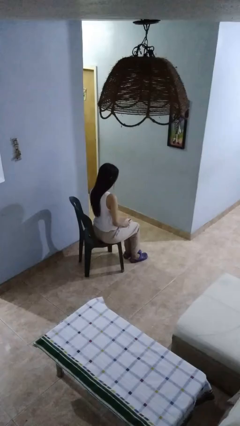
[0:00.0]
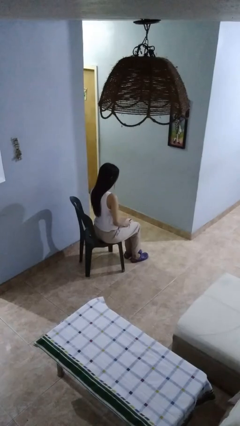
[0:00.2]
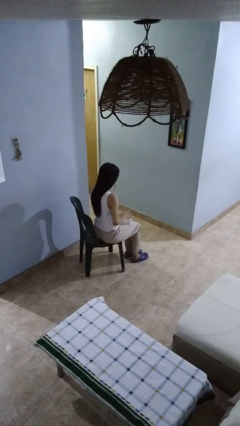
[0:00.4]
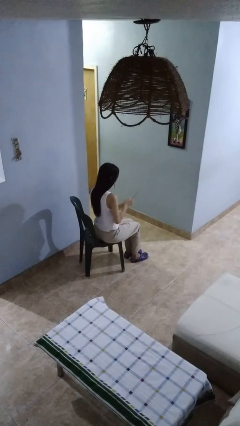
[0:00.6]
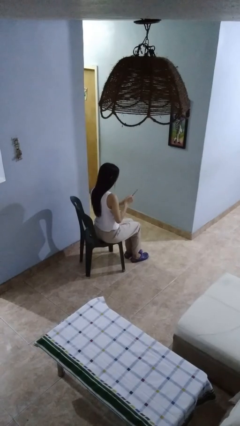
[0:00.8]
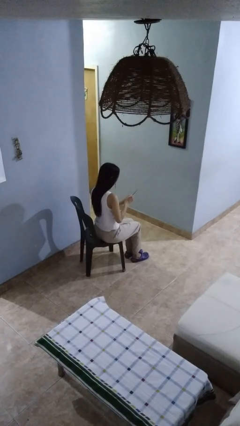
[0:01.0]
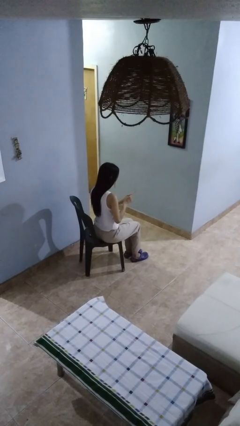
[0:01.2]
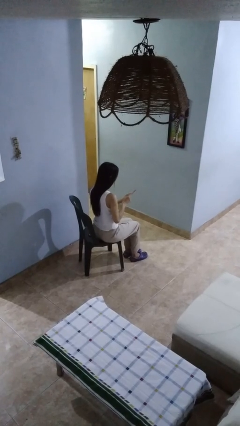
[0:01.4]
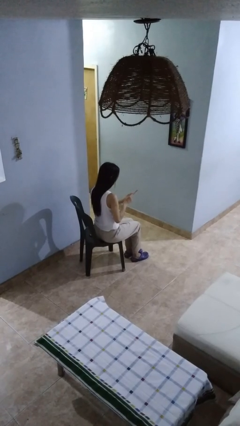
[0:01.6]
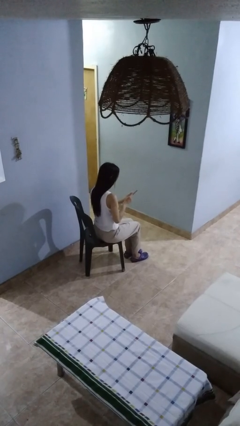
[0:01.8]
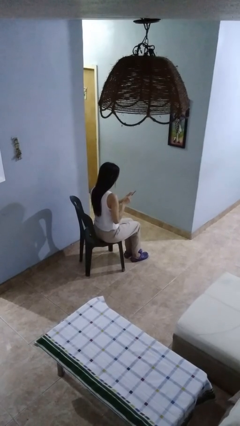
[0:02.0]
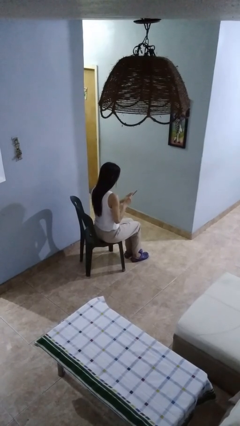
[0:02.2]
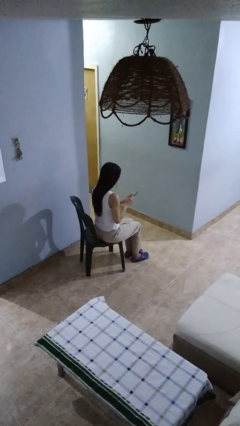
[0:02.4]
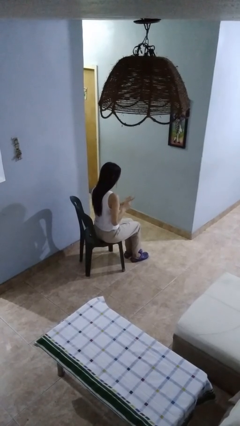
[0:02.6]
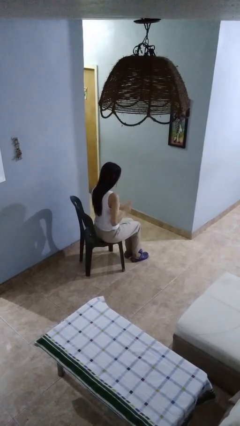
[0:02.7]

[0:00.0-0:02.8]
person files fingernails

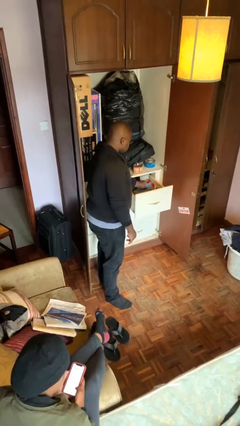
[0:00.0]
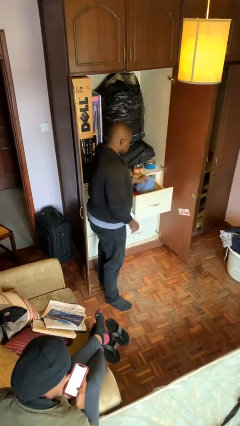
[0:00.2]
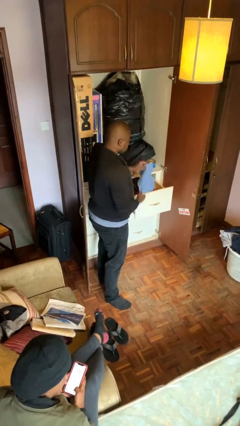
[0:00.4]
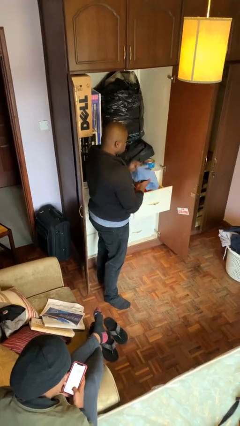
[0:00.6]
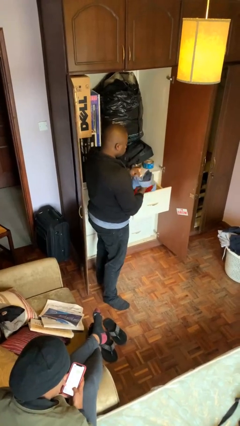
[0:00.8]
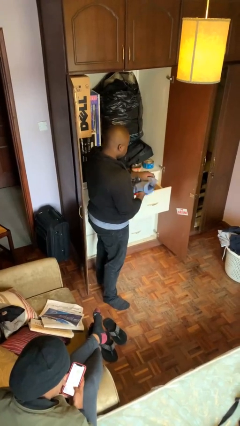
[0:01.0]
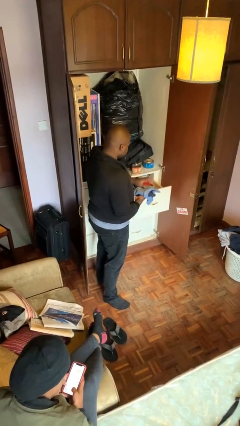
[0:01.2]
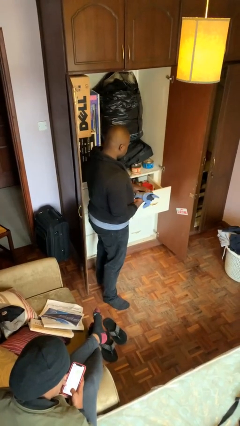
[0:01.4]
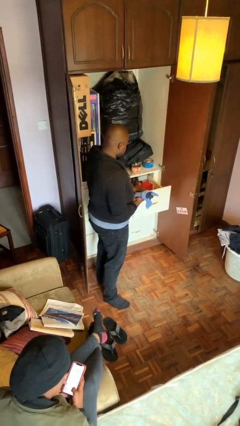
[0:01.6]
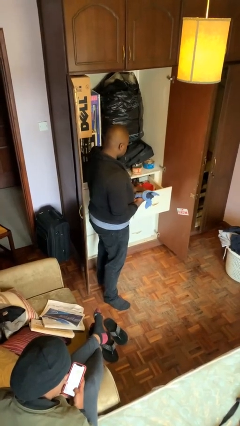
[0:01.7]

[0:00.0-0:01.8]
person takes clothes from dresser

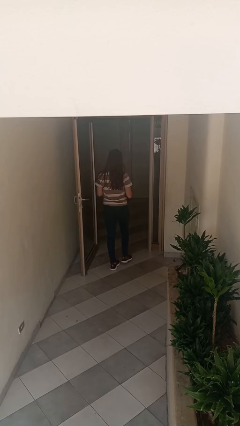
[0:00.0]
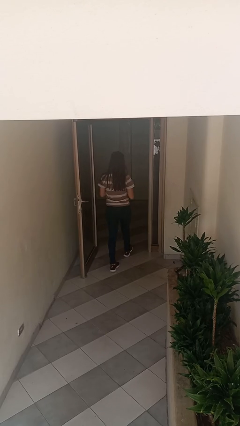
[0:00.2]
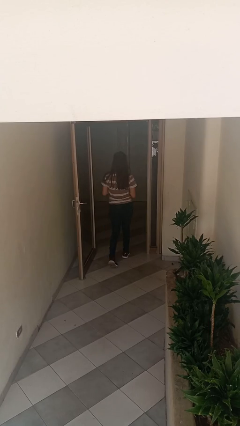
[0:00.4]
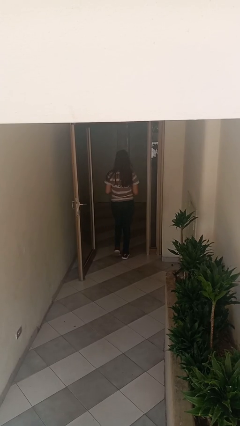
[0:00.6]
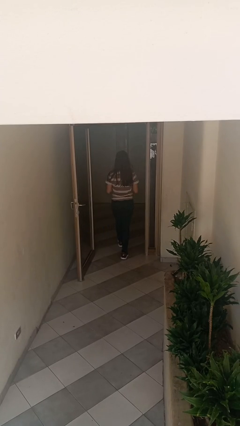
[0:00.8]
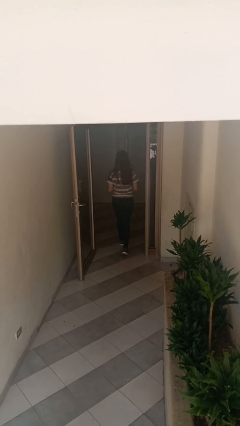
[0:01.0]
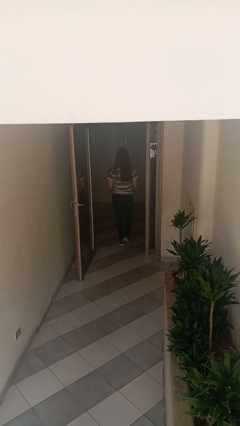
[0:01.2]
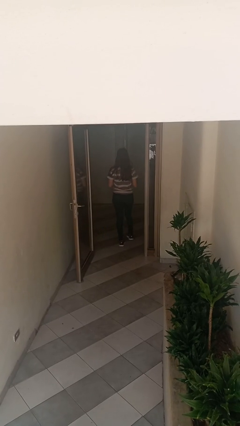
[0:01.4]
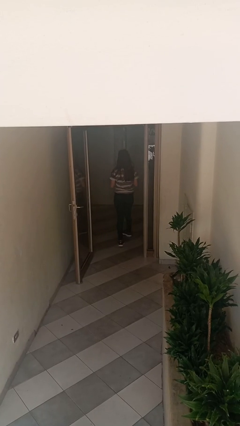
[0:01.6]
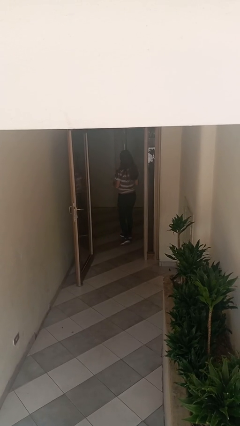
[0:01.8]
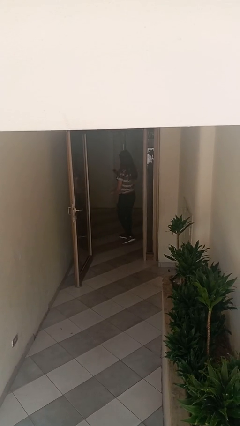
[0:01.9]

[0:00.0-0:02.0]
person exits scene through structure

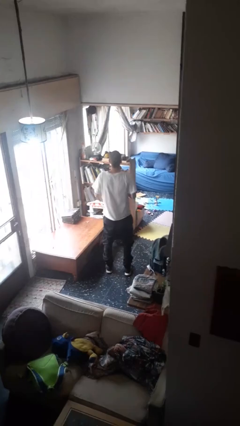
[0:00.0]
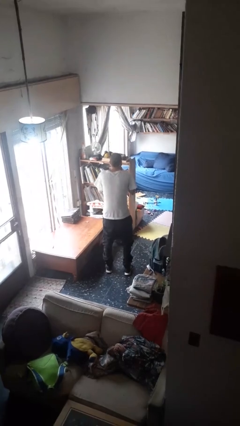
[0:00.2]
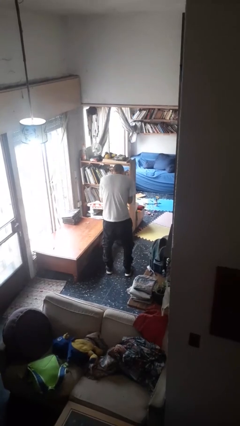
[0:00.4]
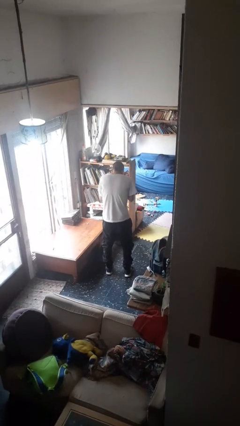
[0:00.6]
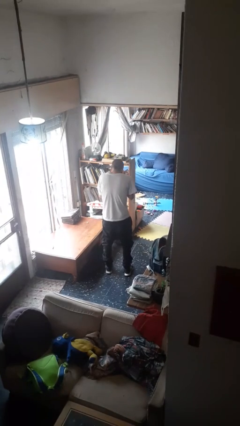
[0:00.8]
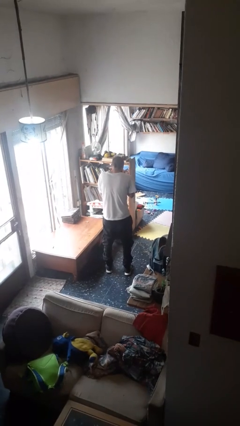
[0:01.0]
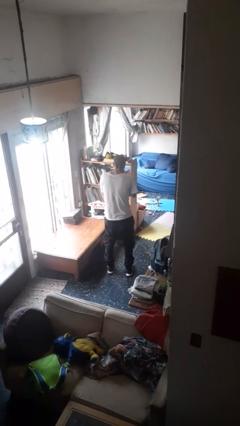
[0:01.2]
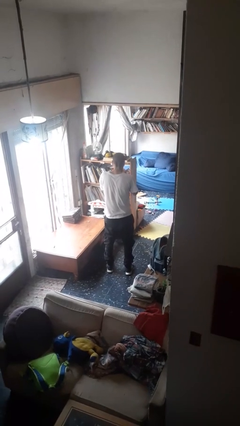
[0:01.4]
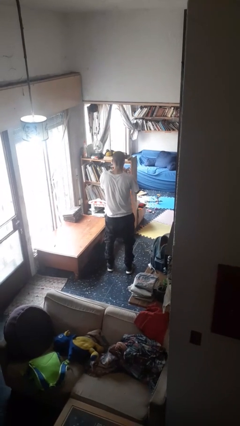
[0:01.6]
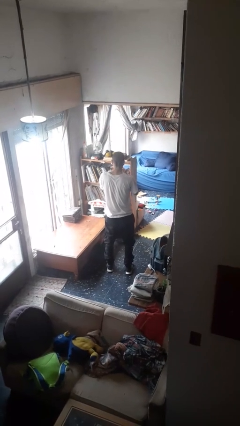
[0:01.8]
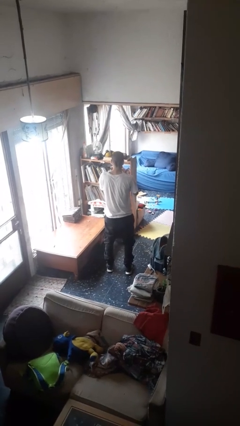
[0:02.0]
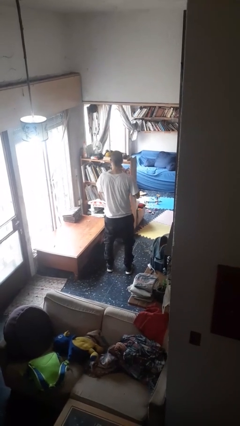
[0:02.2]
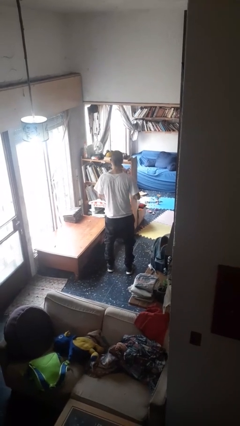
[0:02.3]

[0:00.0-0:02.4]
person sneezes into hand

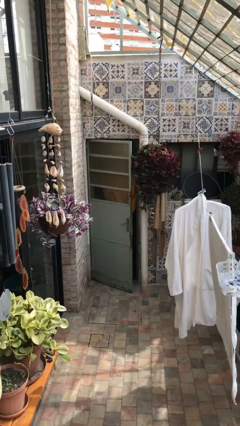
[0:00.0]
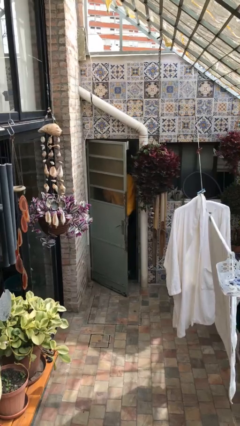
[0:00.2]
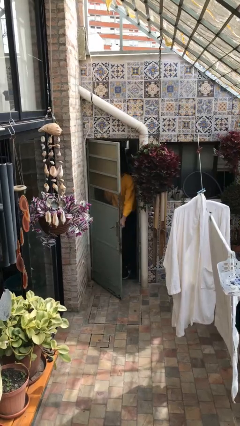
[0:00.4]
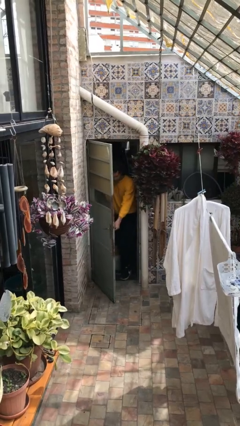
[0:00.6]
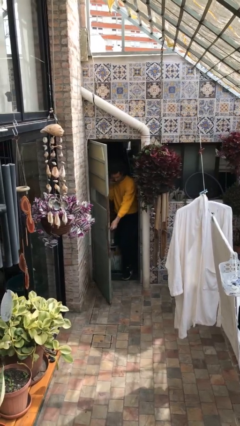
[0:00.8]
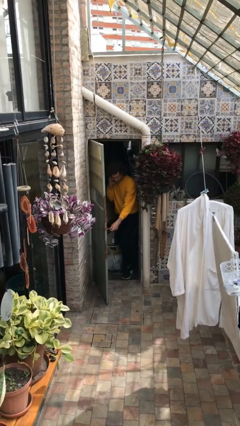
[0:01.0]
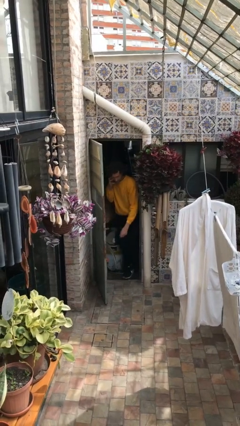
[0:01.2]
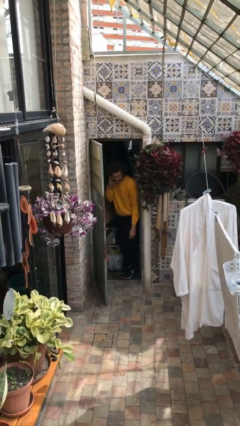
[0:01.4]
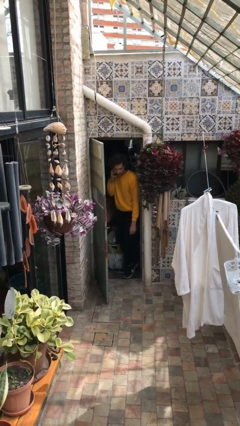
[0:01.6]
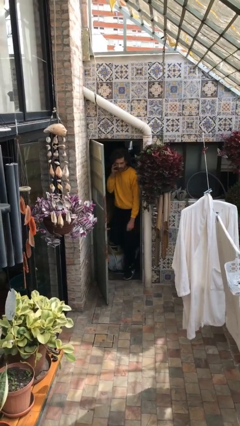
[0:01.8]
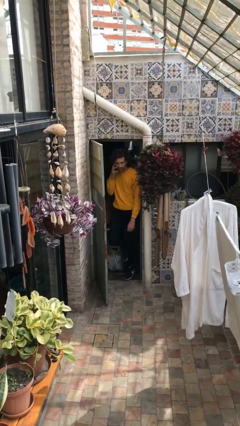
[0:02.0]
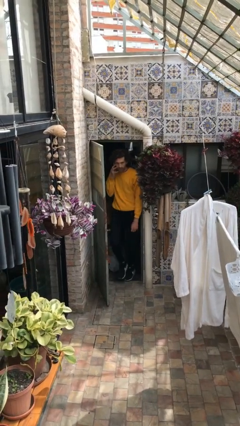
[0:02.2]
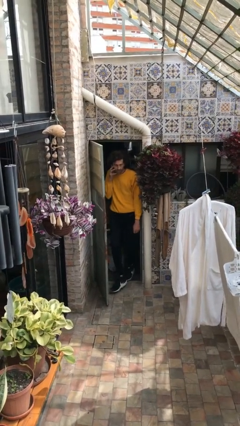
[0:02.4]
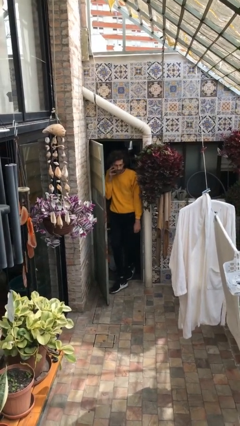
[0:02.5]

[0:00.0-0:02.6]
person opens facility door

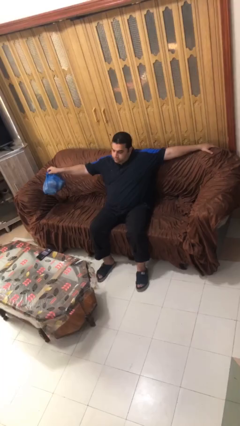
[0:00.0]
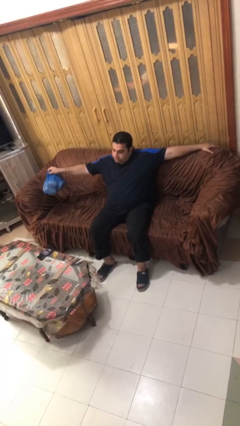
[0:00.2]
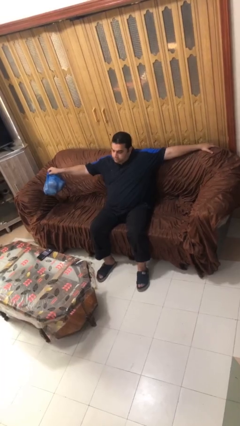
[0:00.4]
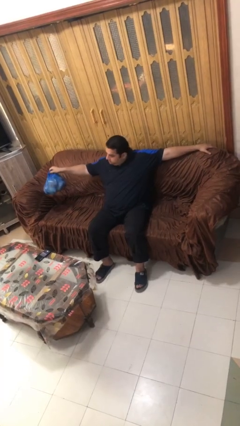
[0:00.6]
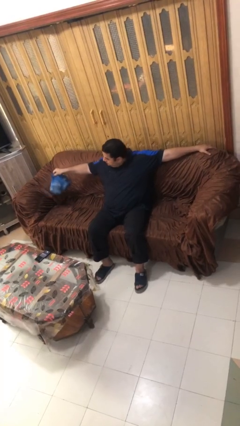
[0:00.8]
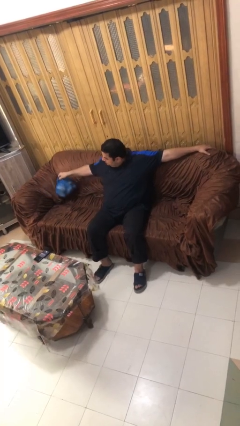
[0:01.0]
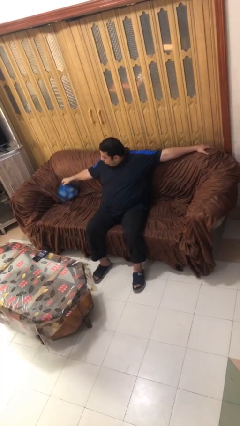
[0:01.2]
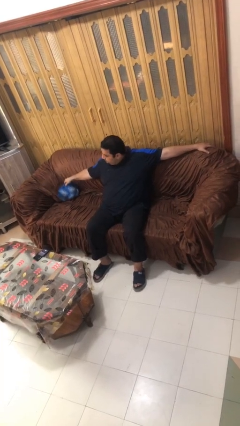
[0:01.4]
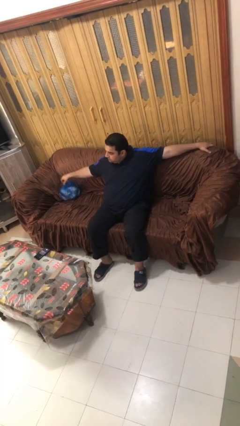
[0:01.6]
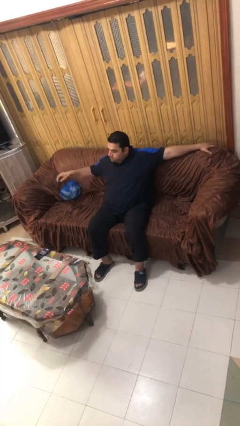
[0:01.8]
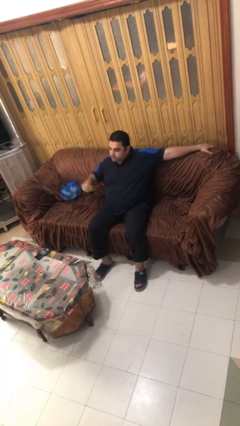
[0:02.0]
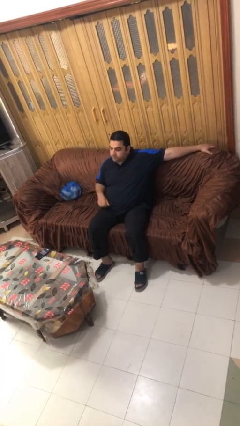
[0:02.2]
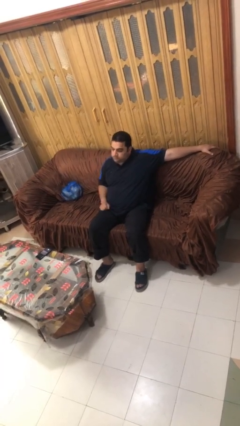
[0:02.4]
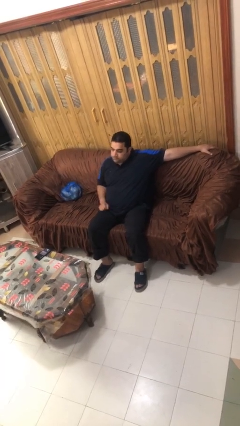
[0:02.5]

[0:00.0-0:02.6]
person puts down object on couch

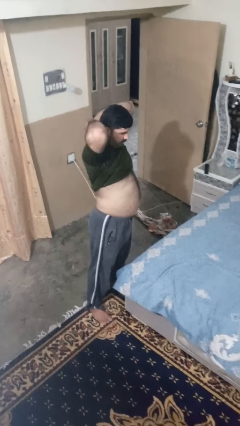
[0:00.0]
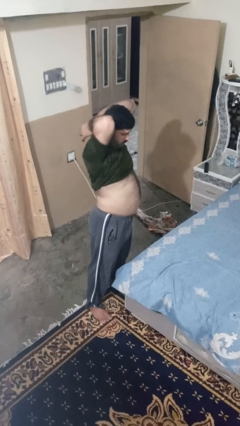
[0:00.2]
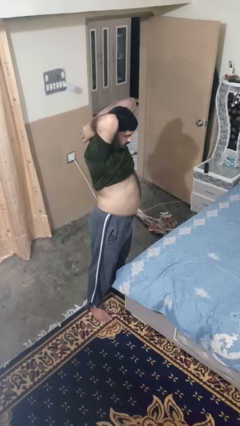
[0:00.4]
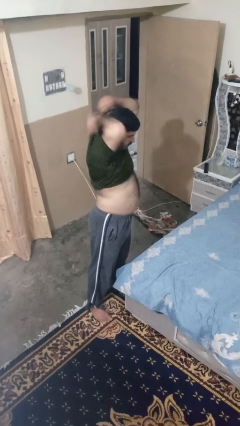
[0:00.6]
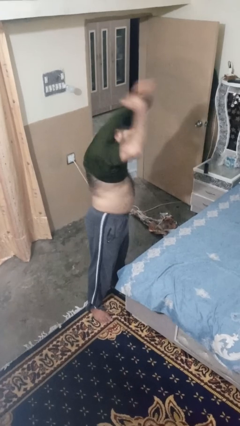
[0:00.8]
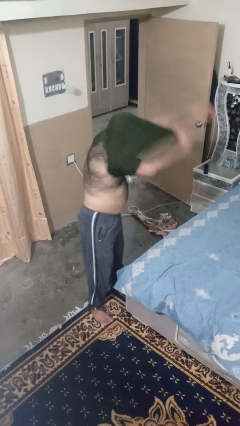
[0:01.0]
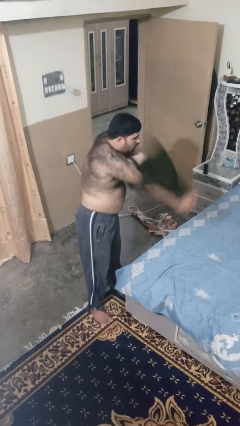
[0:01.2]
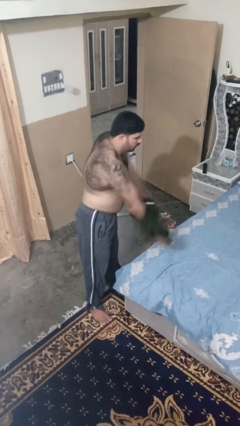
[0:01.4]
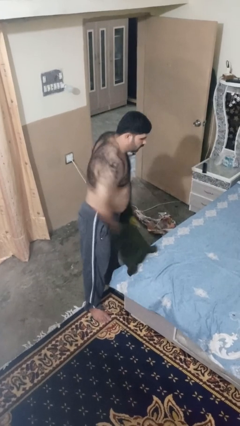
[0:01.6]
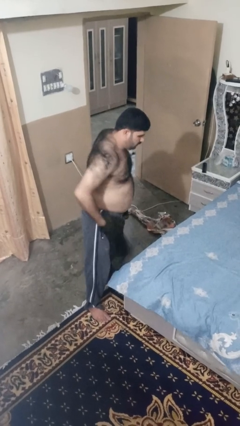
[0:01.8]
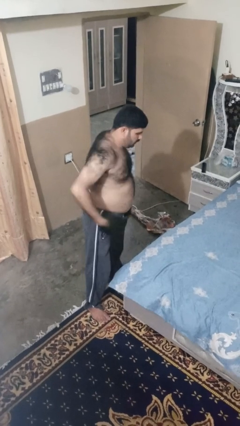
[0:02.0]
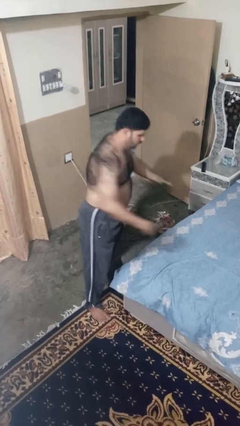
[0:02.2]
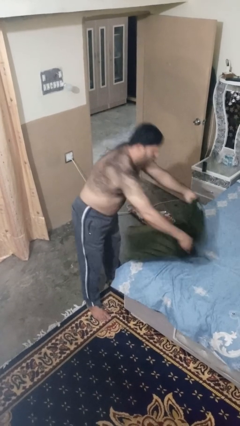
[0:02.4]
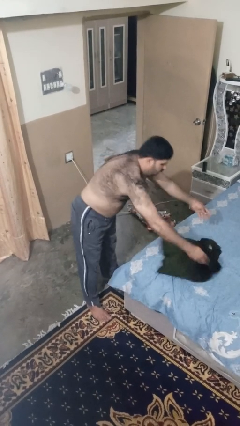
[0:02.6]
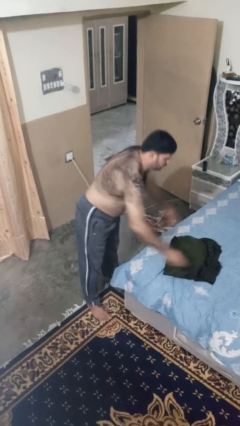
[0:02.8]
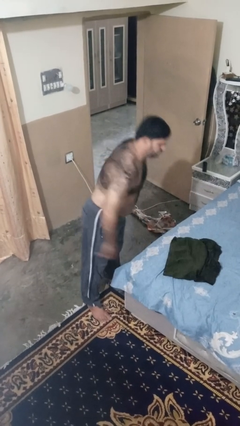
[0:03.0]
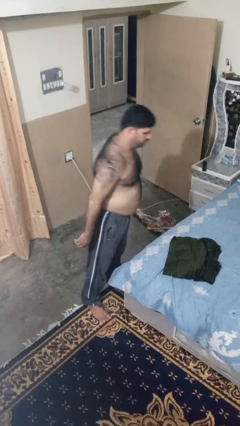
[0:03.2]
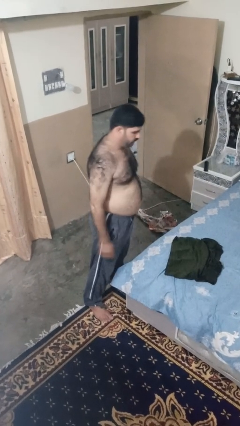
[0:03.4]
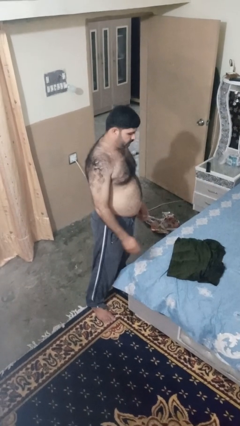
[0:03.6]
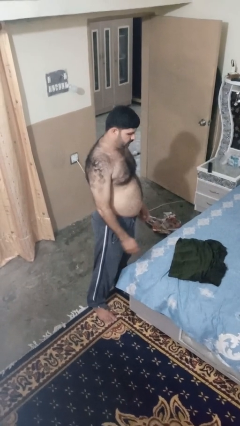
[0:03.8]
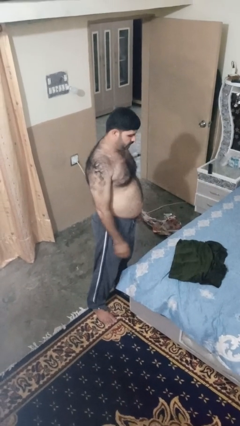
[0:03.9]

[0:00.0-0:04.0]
person takes off shirt
